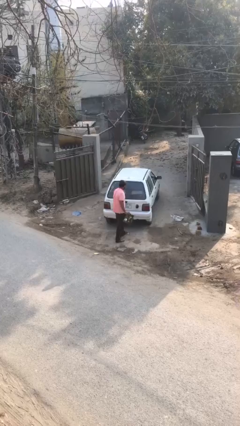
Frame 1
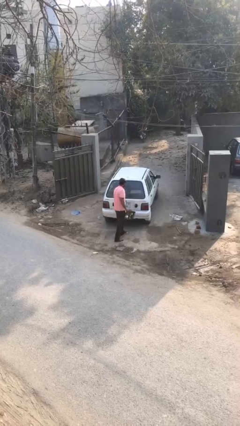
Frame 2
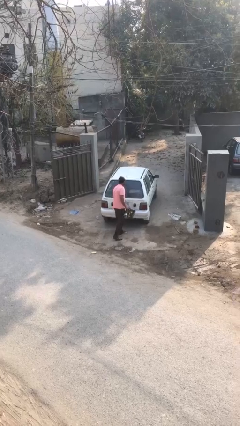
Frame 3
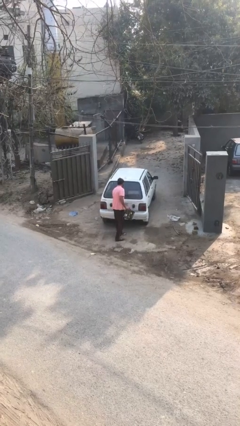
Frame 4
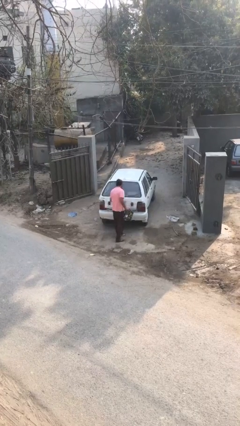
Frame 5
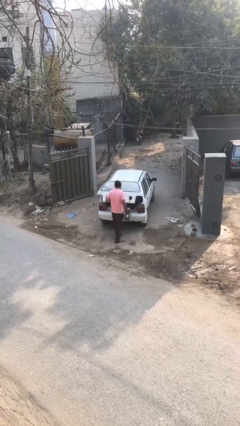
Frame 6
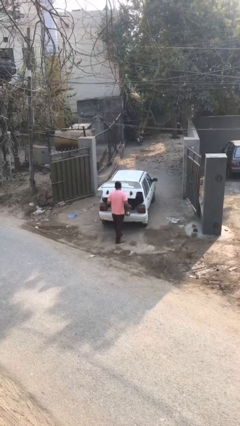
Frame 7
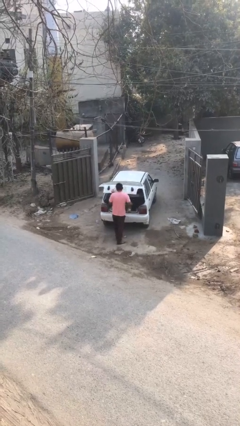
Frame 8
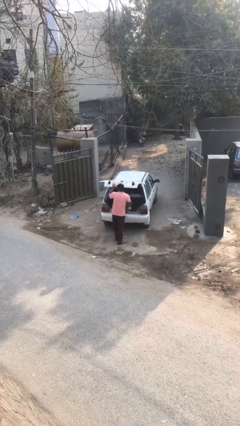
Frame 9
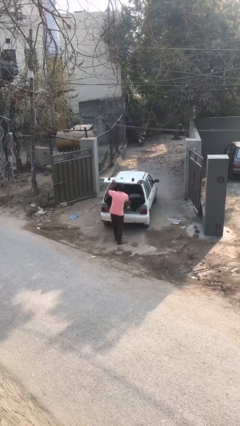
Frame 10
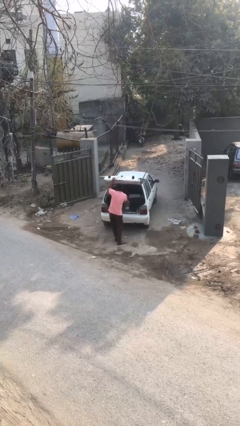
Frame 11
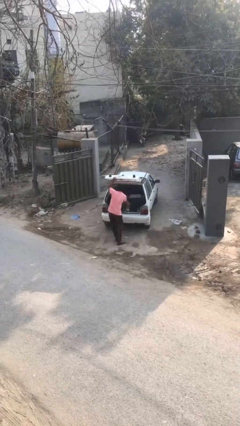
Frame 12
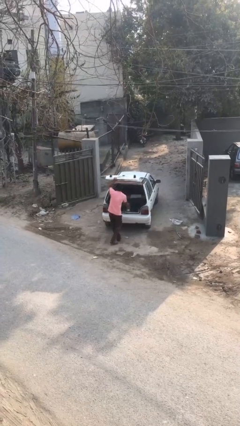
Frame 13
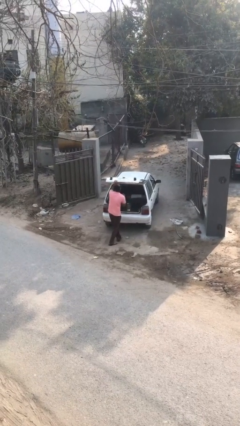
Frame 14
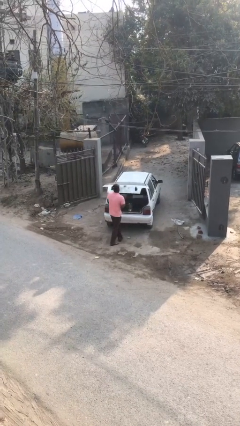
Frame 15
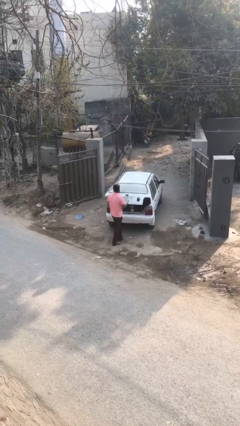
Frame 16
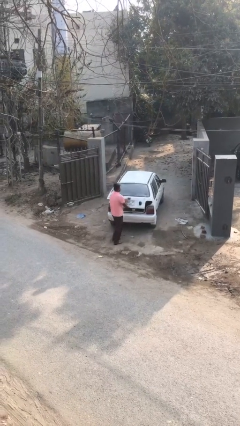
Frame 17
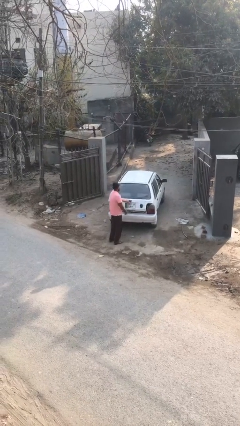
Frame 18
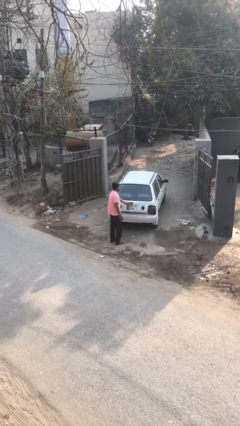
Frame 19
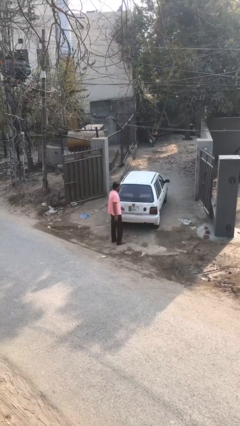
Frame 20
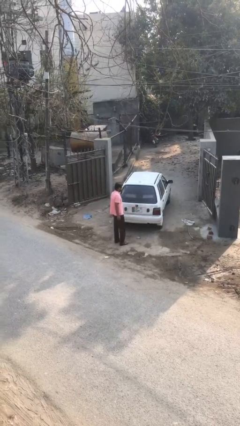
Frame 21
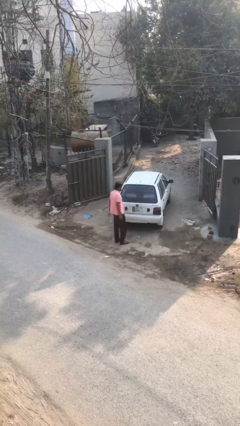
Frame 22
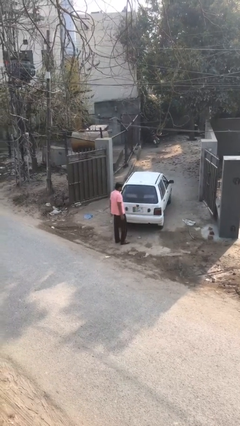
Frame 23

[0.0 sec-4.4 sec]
person loads car

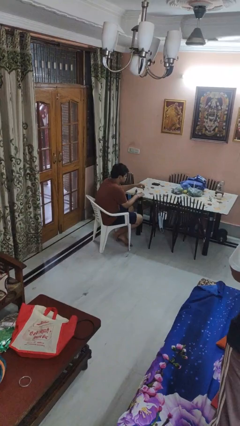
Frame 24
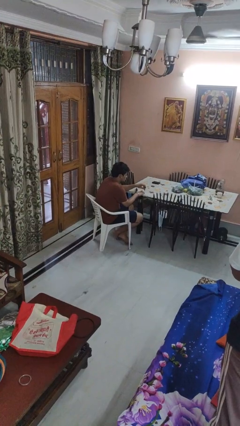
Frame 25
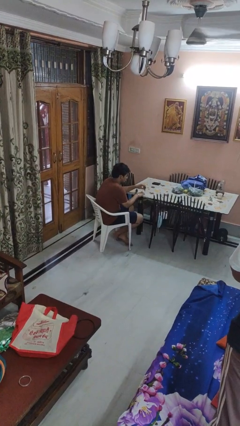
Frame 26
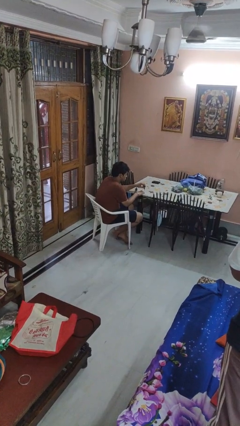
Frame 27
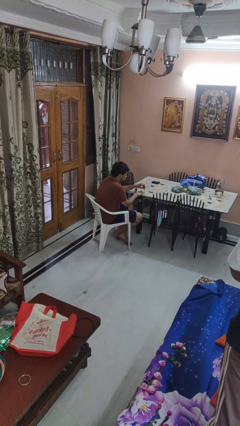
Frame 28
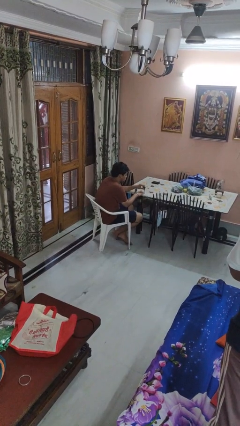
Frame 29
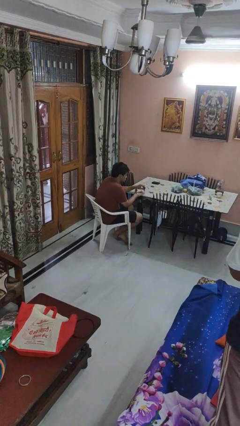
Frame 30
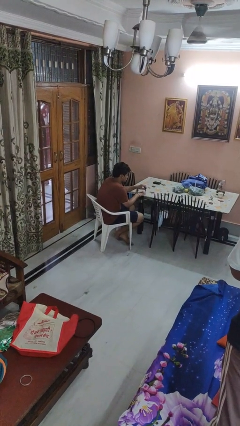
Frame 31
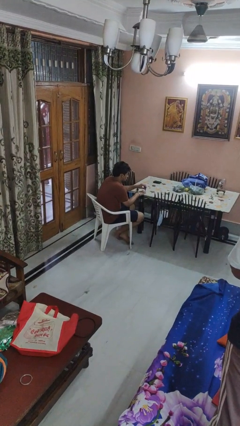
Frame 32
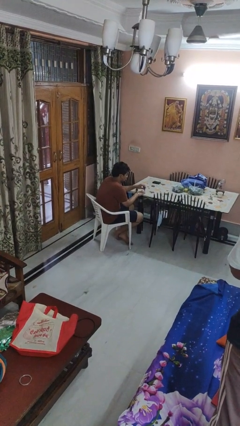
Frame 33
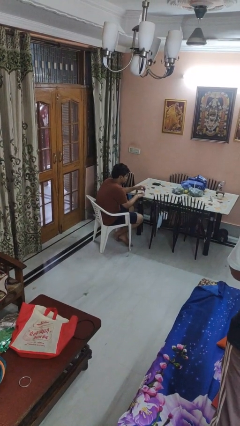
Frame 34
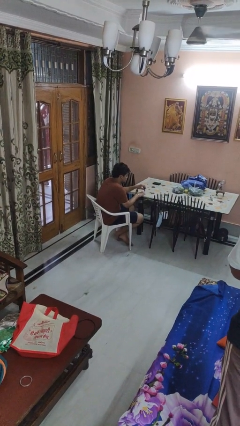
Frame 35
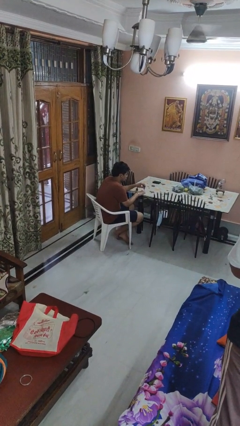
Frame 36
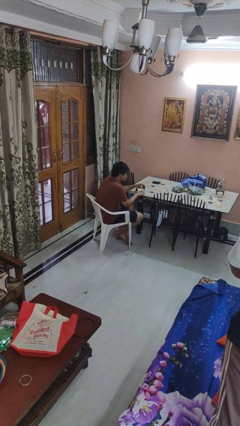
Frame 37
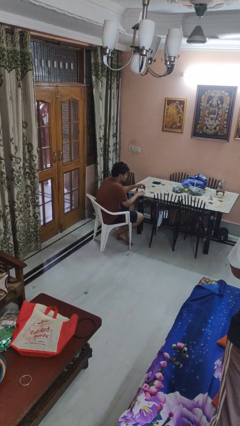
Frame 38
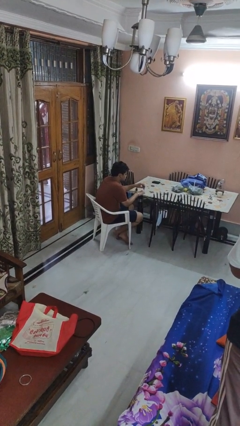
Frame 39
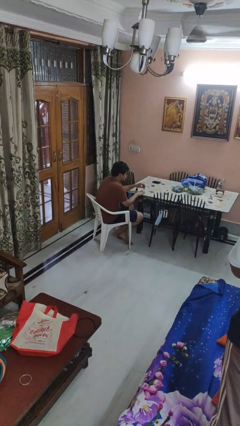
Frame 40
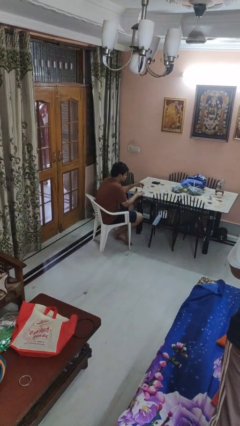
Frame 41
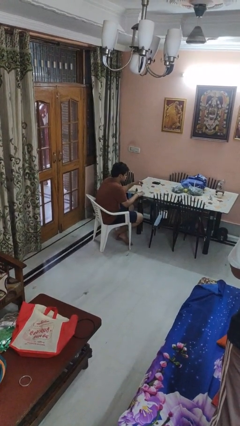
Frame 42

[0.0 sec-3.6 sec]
person paints fingernails

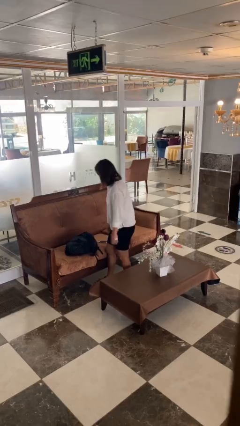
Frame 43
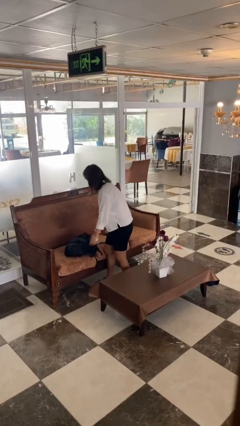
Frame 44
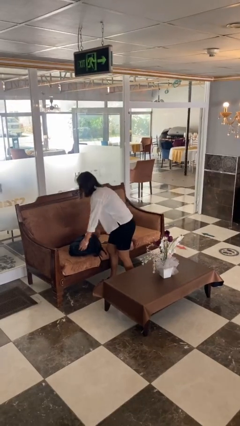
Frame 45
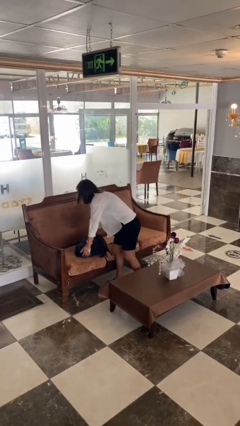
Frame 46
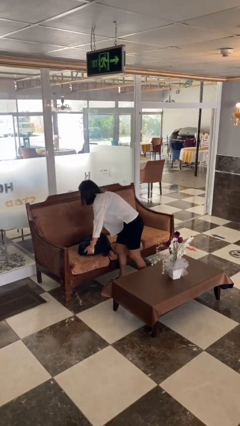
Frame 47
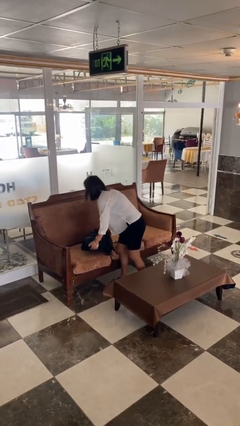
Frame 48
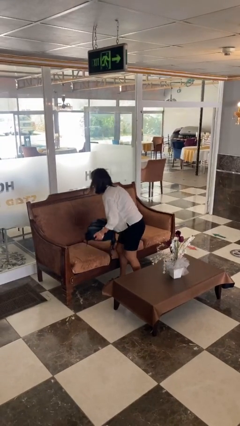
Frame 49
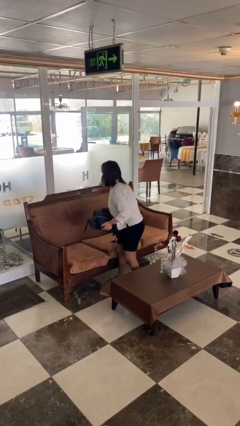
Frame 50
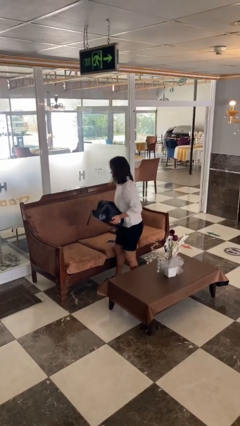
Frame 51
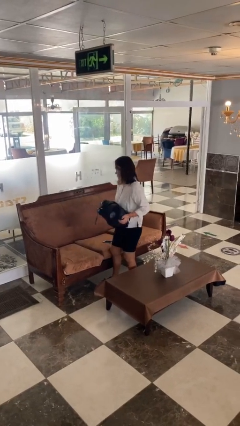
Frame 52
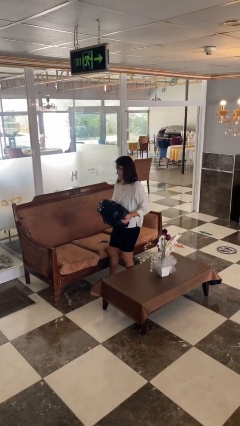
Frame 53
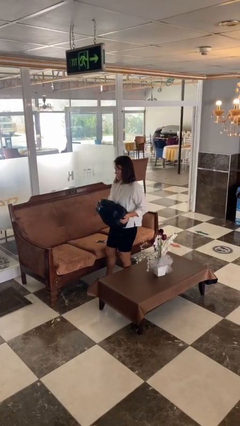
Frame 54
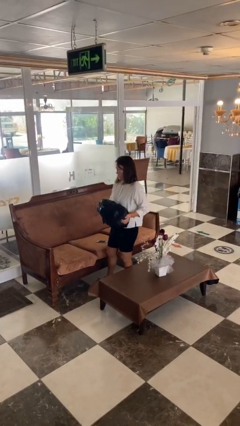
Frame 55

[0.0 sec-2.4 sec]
person picks up object from couch

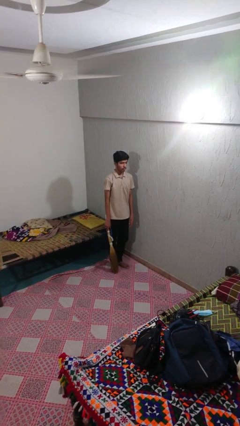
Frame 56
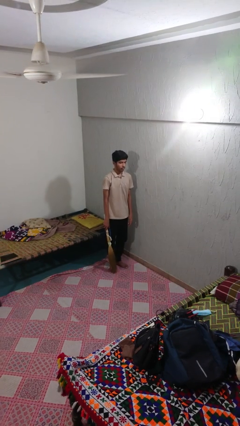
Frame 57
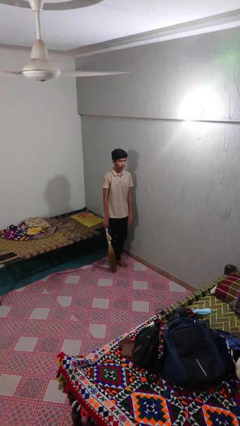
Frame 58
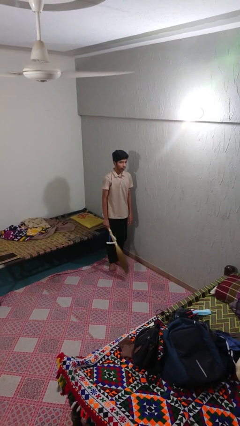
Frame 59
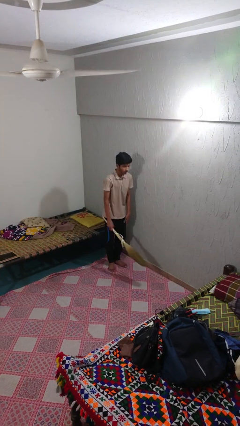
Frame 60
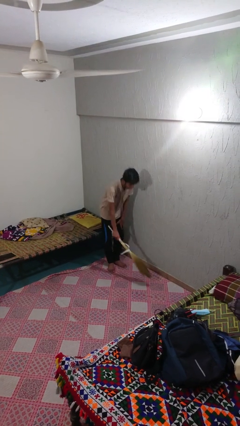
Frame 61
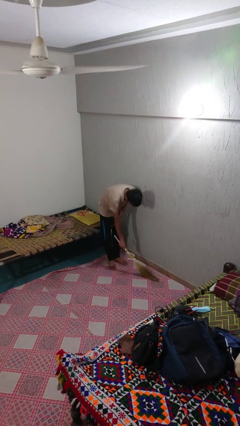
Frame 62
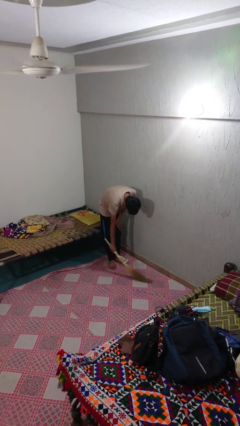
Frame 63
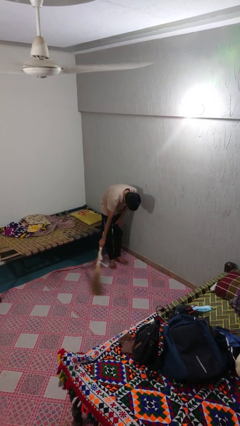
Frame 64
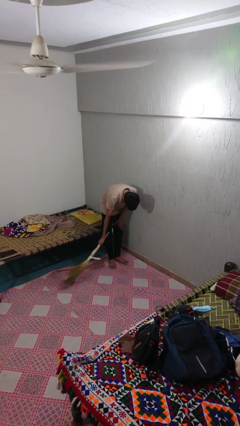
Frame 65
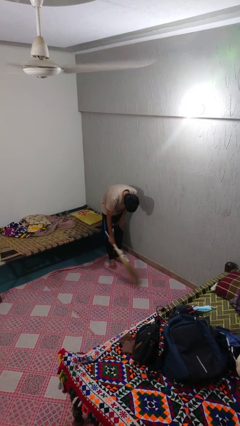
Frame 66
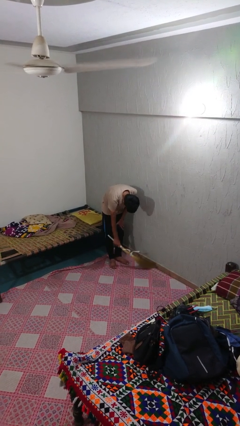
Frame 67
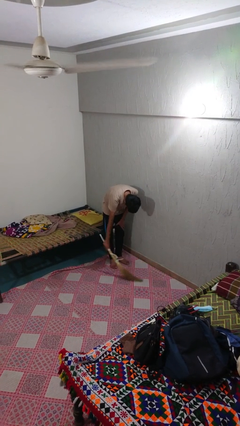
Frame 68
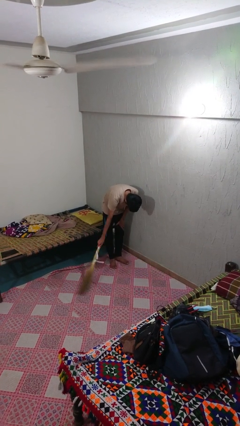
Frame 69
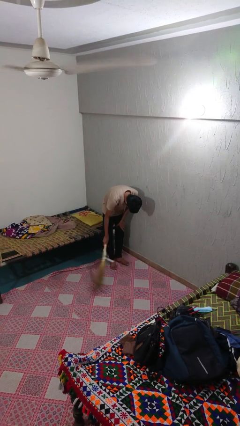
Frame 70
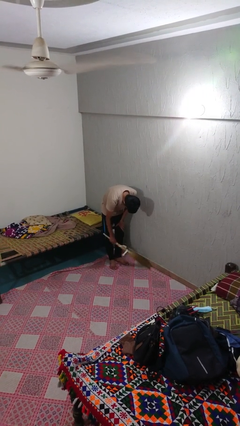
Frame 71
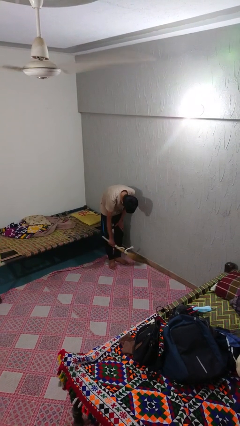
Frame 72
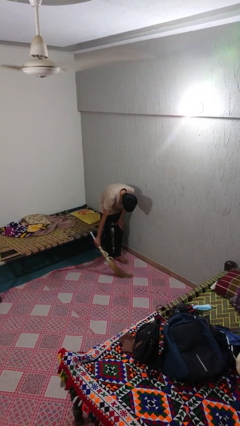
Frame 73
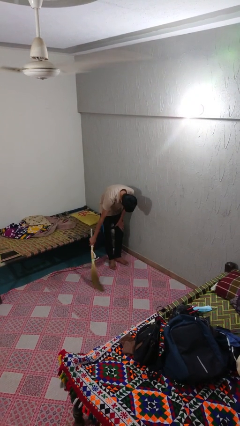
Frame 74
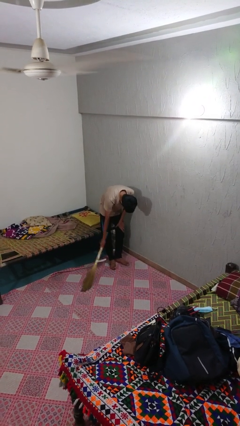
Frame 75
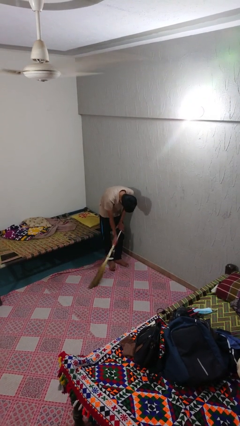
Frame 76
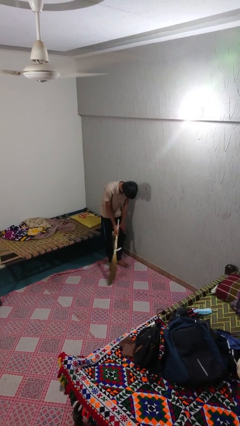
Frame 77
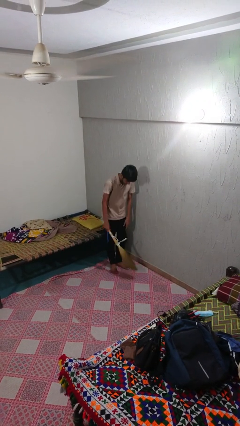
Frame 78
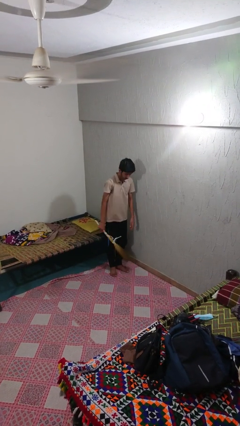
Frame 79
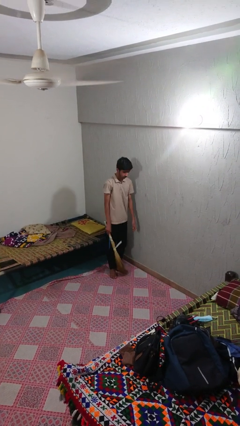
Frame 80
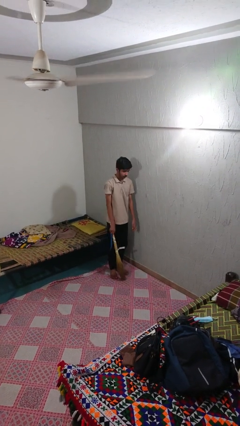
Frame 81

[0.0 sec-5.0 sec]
person sweeps floor

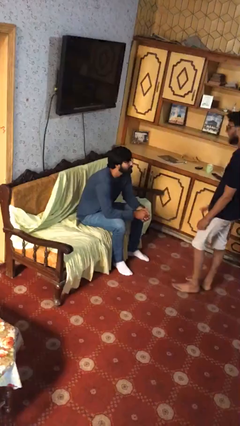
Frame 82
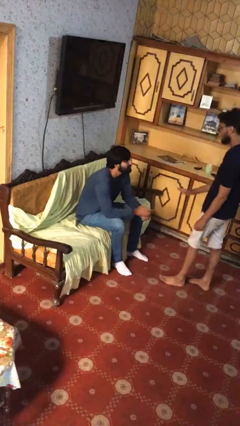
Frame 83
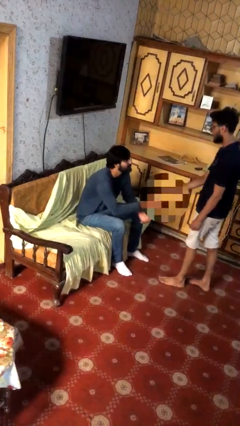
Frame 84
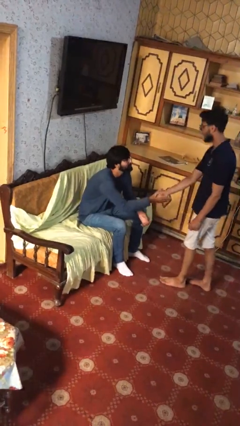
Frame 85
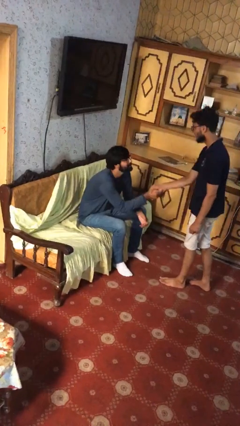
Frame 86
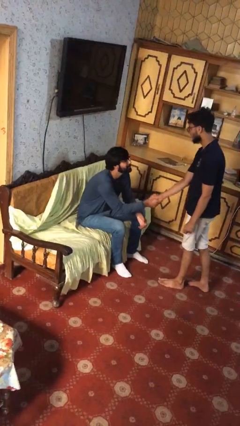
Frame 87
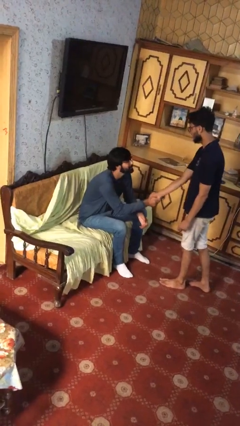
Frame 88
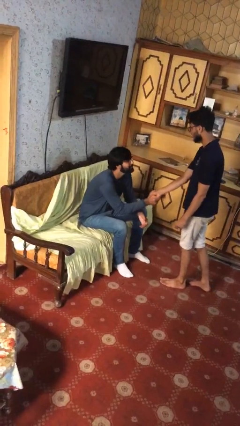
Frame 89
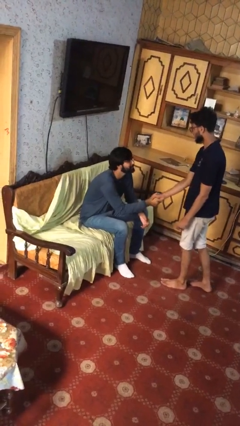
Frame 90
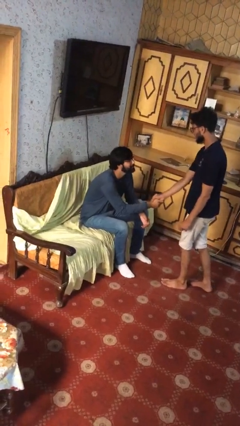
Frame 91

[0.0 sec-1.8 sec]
person shakes hand
